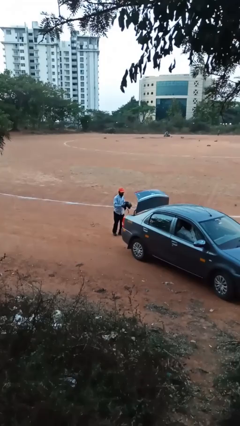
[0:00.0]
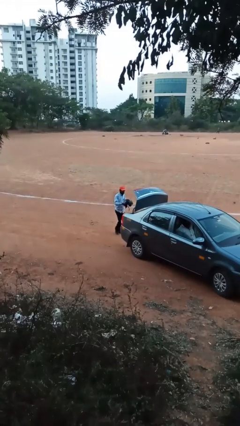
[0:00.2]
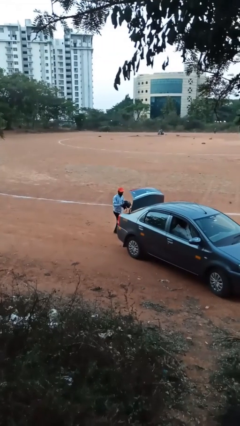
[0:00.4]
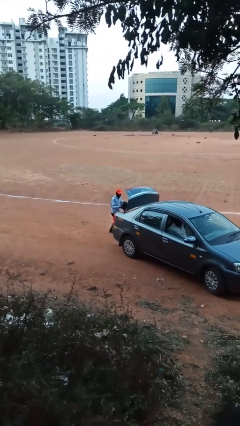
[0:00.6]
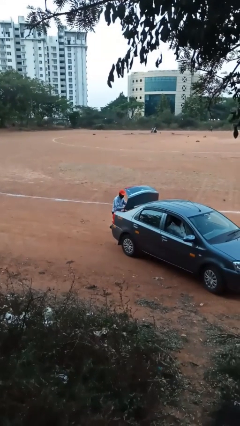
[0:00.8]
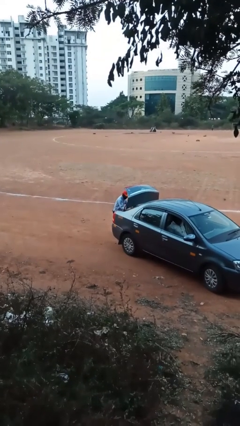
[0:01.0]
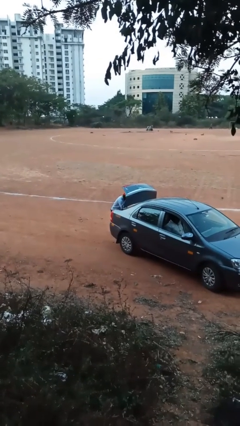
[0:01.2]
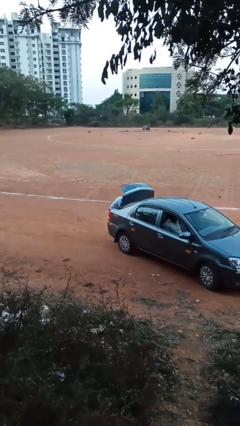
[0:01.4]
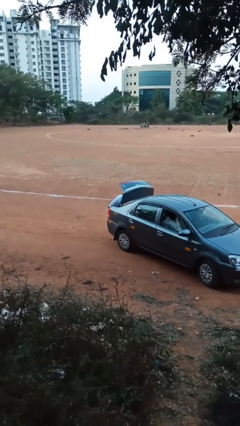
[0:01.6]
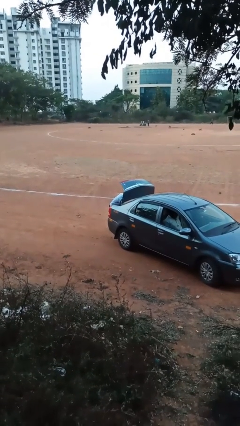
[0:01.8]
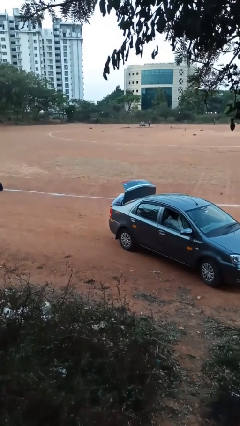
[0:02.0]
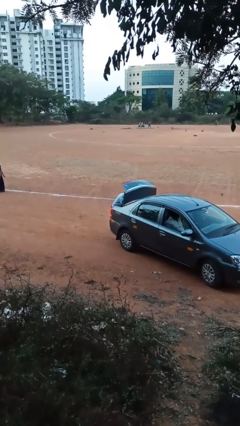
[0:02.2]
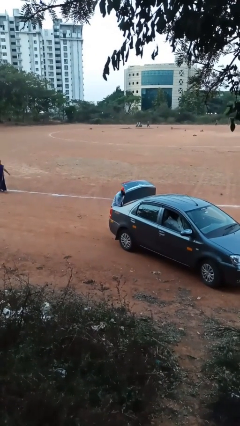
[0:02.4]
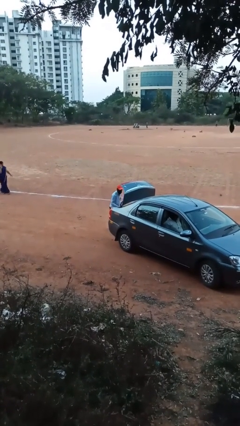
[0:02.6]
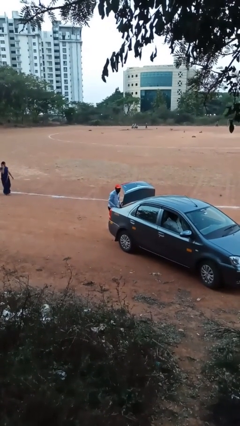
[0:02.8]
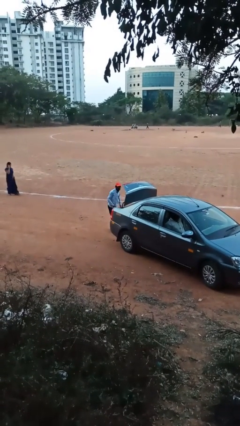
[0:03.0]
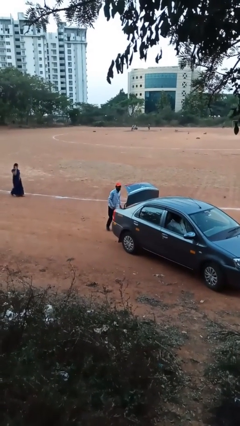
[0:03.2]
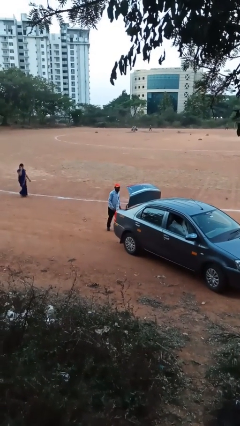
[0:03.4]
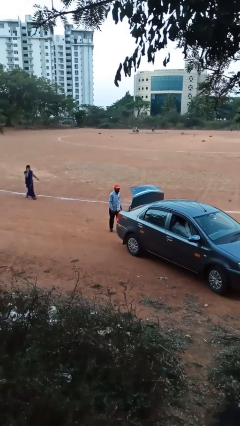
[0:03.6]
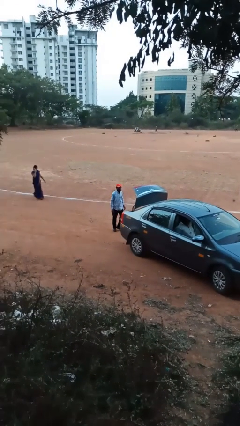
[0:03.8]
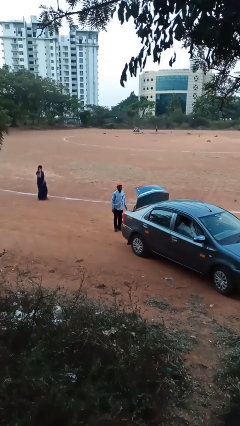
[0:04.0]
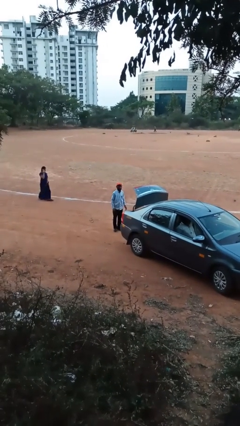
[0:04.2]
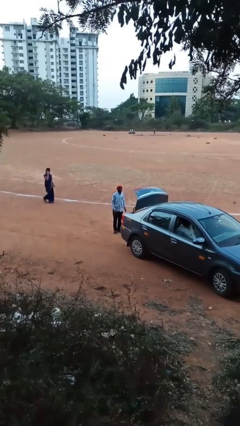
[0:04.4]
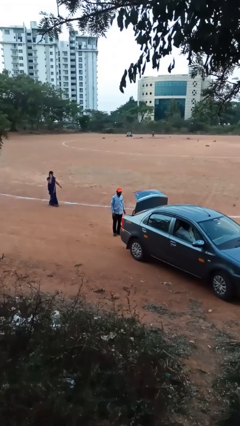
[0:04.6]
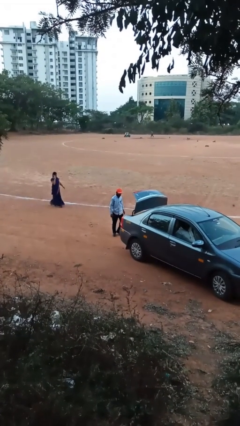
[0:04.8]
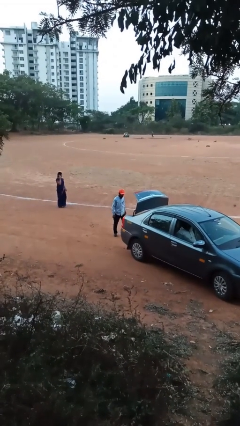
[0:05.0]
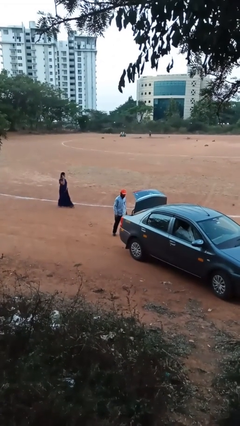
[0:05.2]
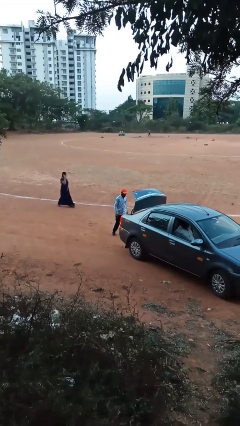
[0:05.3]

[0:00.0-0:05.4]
person loads car

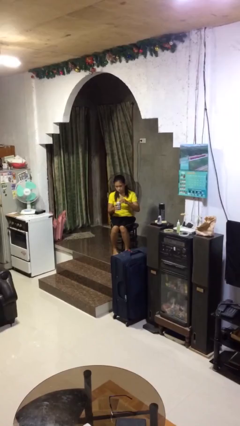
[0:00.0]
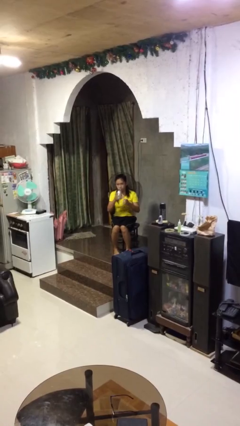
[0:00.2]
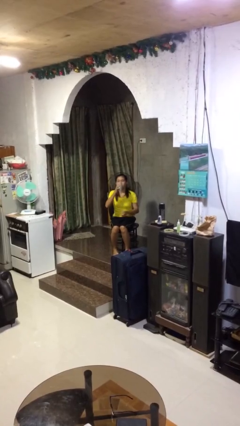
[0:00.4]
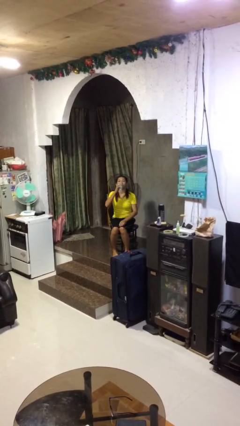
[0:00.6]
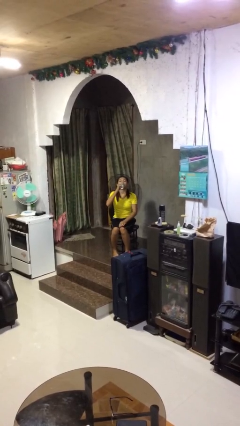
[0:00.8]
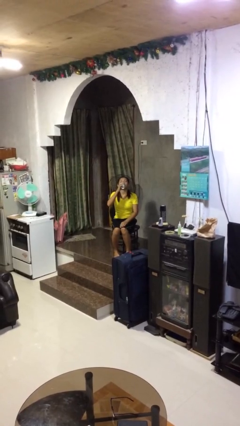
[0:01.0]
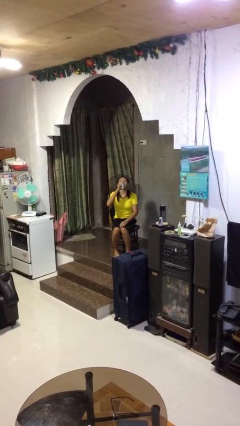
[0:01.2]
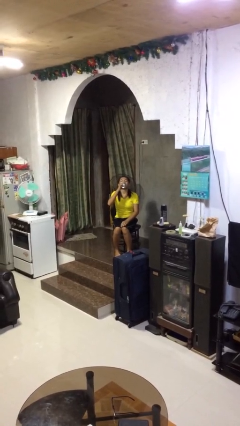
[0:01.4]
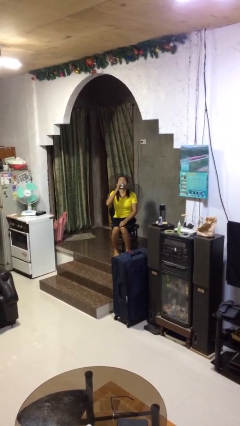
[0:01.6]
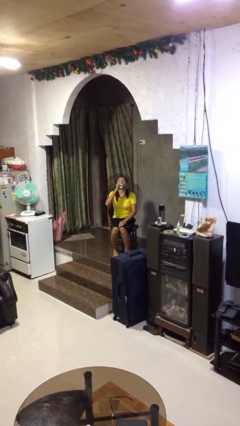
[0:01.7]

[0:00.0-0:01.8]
person drinks from beverage can

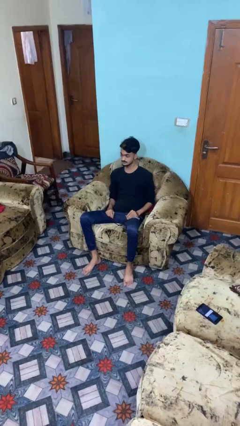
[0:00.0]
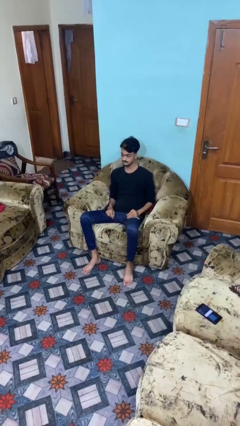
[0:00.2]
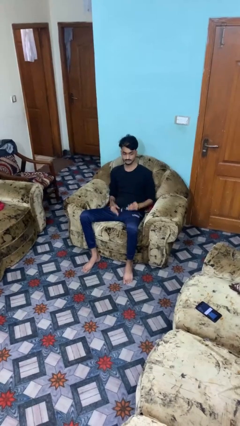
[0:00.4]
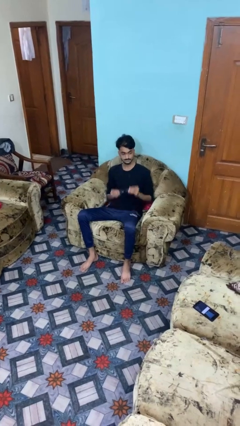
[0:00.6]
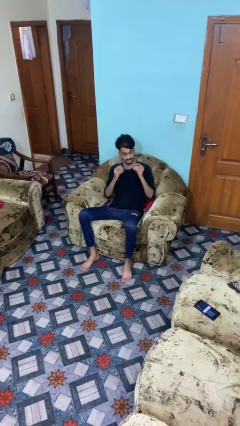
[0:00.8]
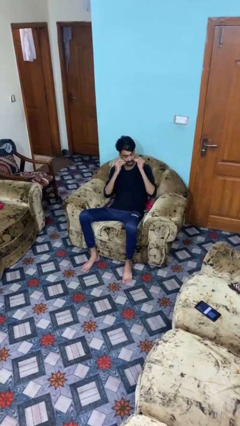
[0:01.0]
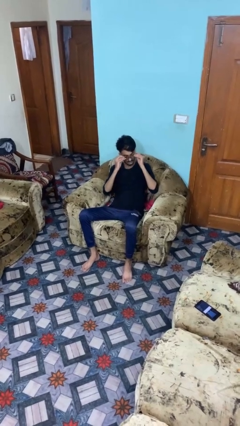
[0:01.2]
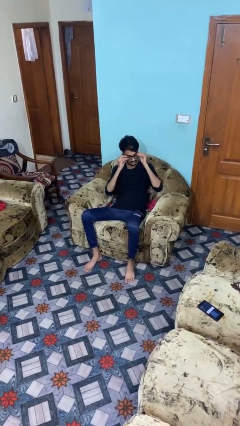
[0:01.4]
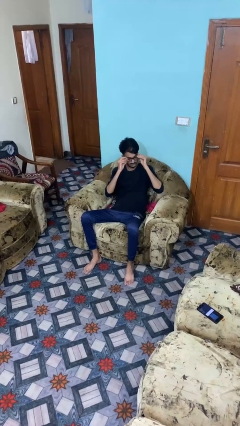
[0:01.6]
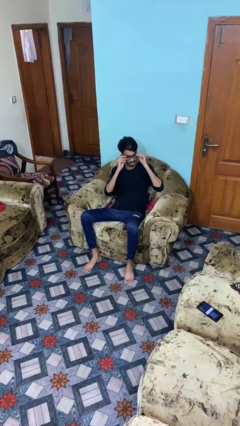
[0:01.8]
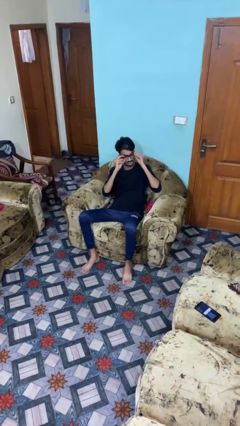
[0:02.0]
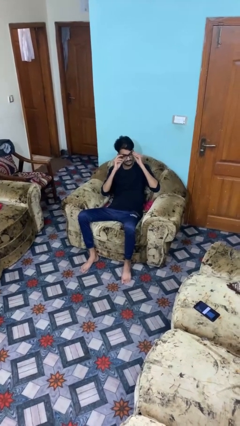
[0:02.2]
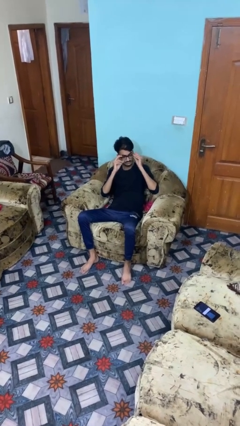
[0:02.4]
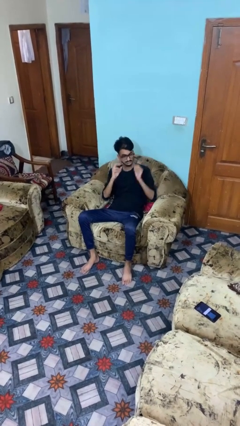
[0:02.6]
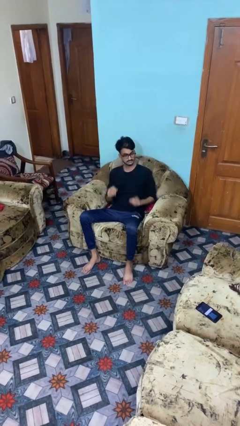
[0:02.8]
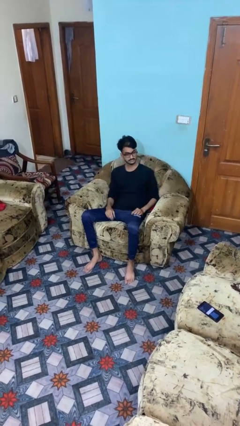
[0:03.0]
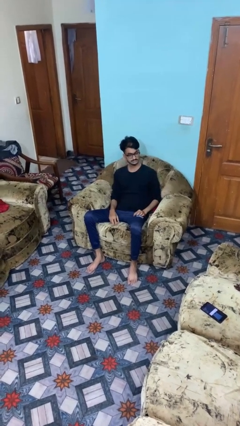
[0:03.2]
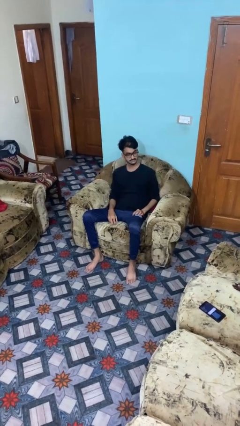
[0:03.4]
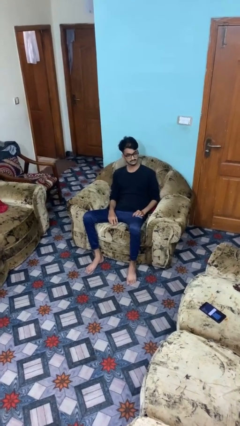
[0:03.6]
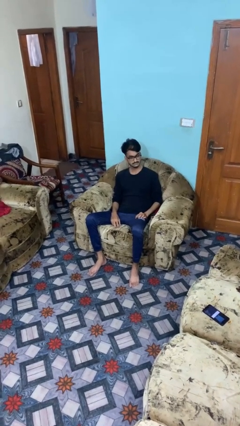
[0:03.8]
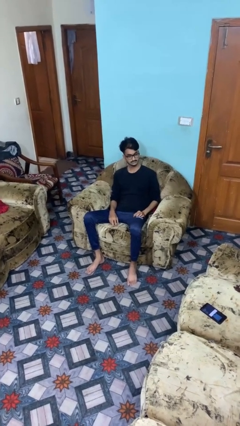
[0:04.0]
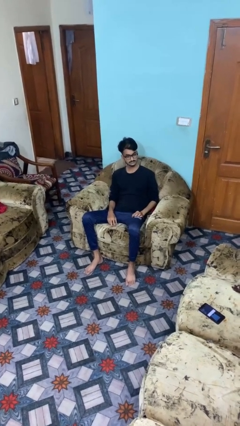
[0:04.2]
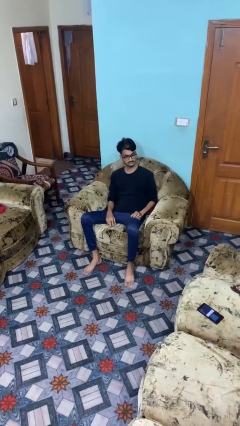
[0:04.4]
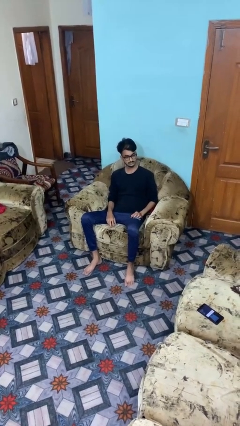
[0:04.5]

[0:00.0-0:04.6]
person puts on glasses

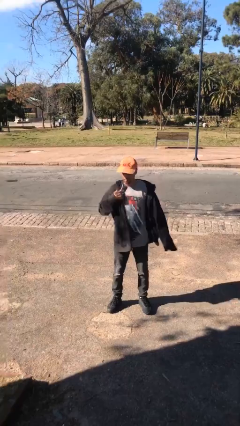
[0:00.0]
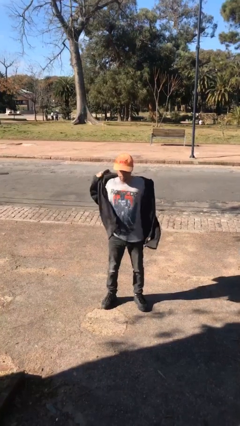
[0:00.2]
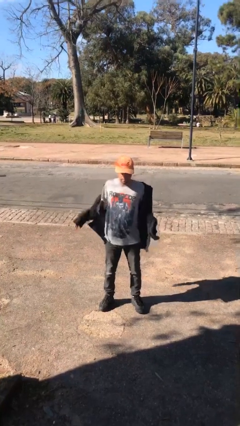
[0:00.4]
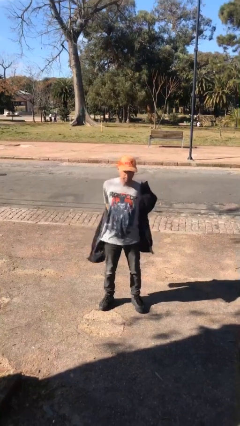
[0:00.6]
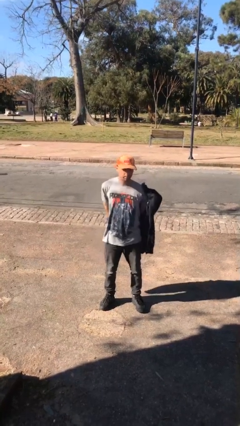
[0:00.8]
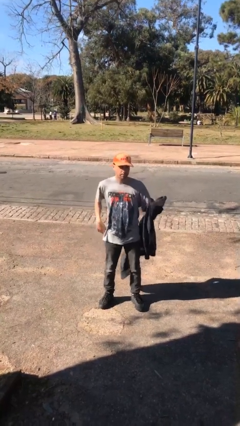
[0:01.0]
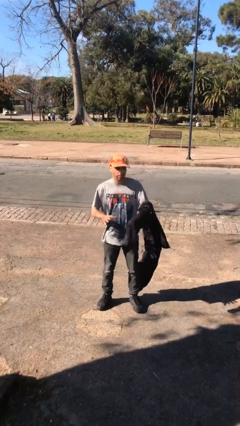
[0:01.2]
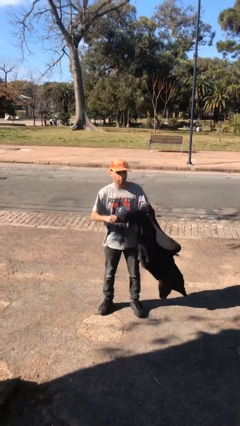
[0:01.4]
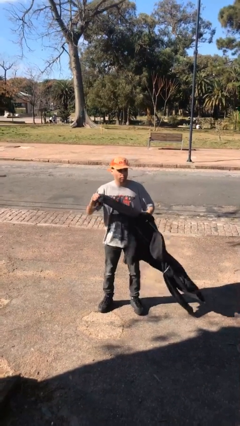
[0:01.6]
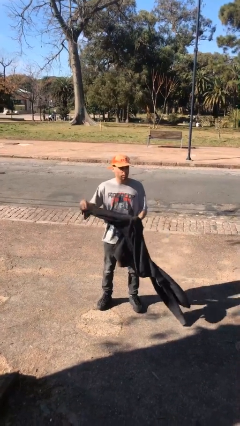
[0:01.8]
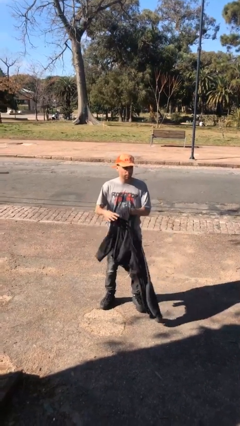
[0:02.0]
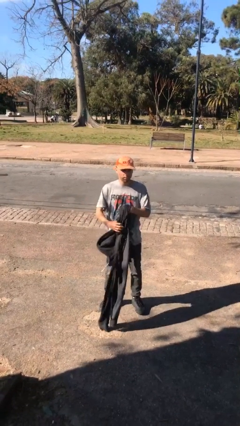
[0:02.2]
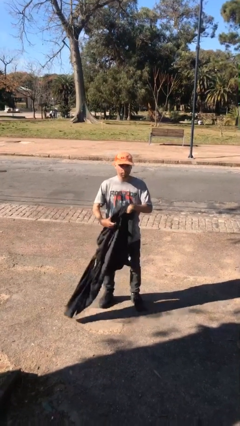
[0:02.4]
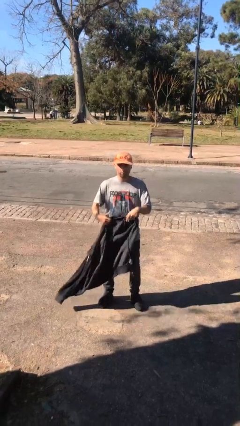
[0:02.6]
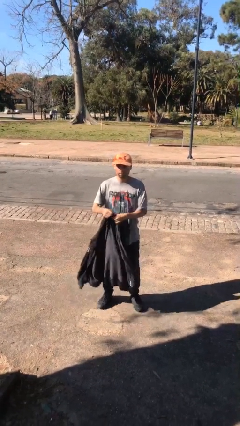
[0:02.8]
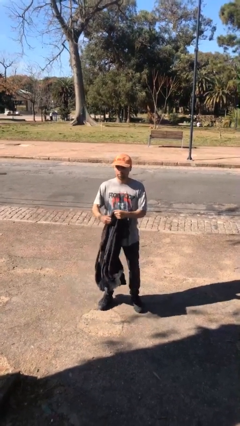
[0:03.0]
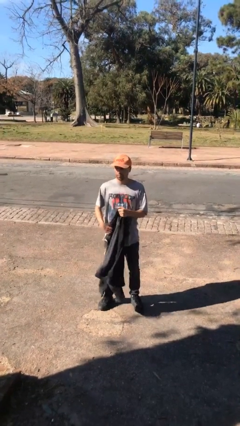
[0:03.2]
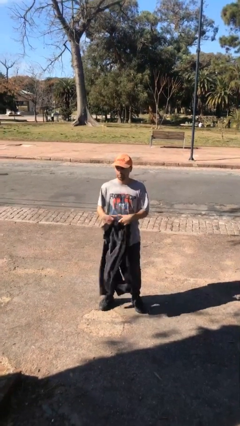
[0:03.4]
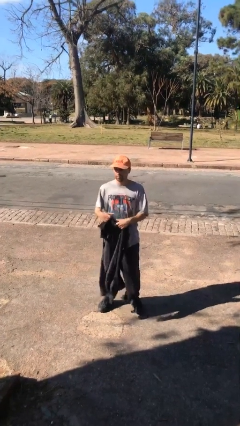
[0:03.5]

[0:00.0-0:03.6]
person takes off jacket

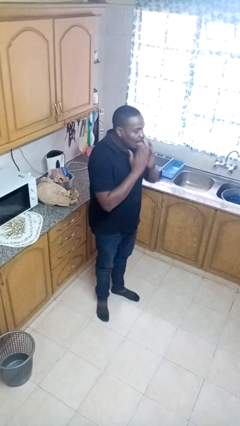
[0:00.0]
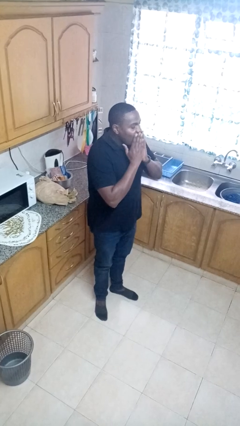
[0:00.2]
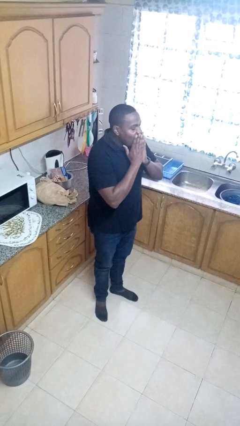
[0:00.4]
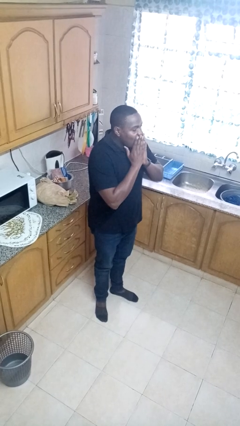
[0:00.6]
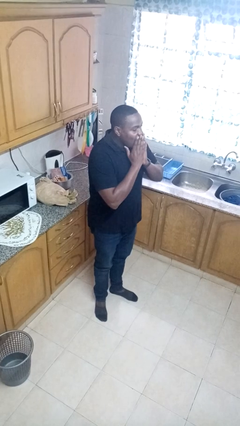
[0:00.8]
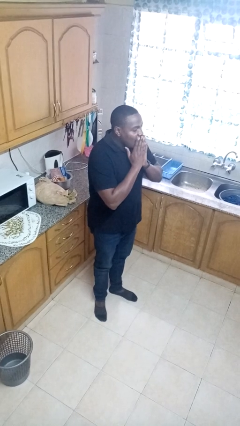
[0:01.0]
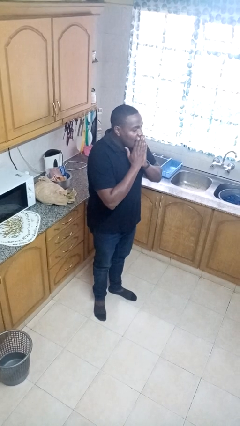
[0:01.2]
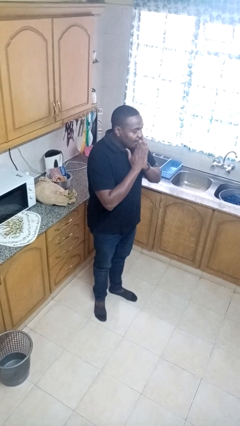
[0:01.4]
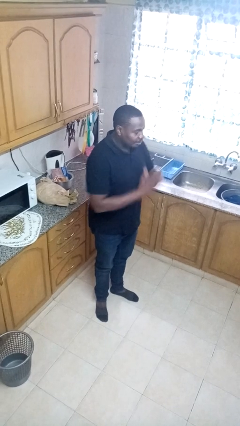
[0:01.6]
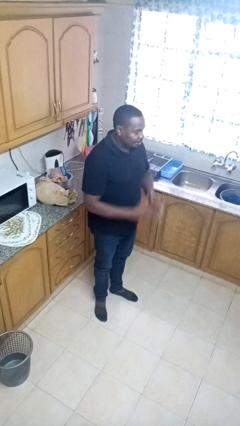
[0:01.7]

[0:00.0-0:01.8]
person yawns

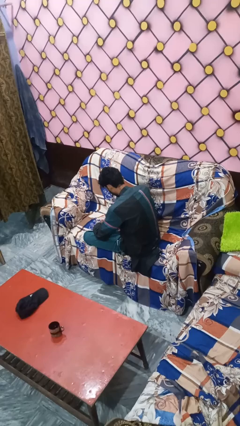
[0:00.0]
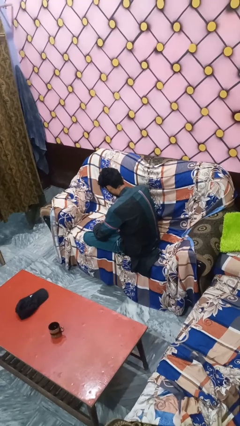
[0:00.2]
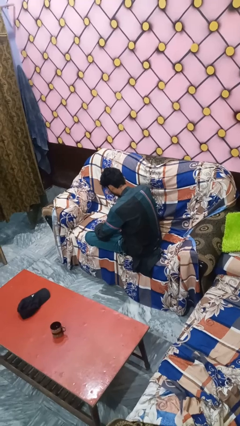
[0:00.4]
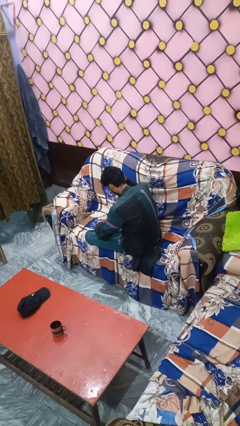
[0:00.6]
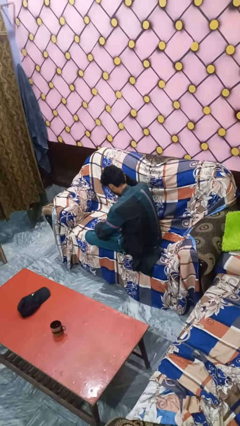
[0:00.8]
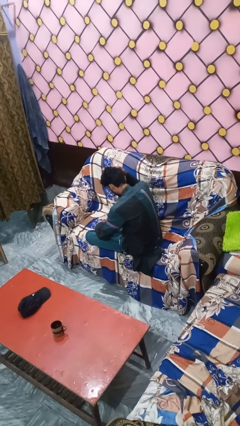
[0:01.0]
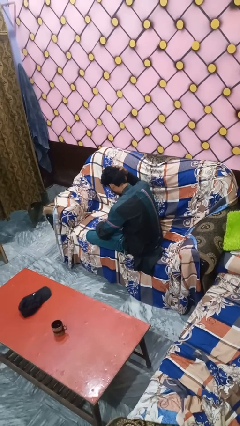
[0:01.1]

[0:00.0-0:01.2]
person pats head
